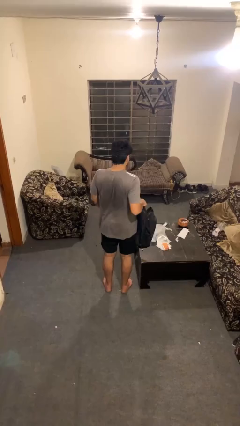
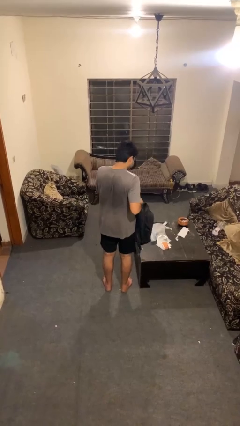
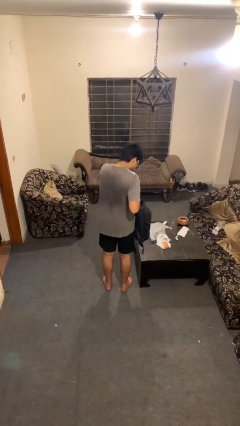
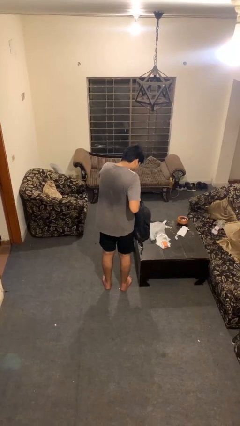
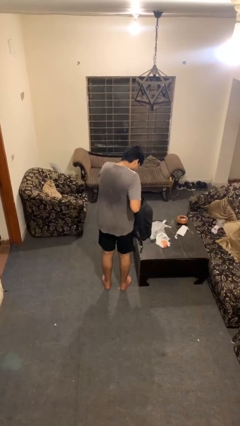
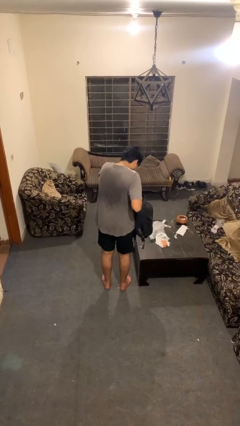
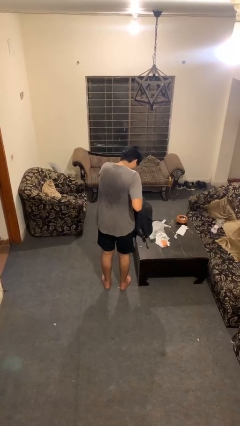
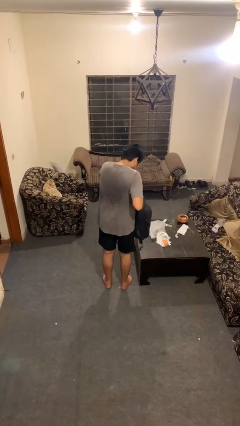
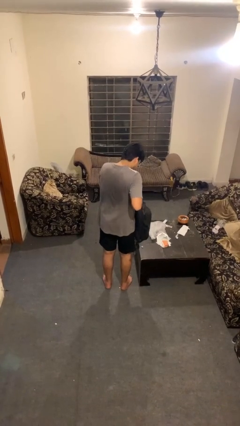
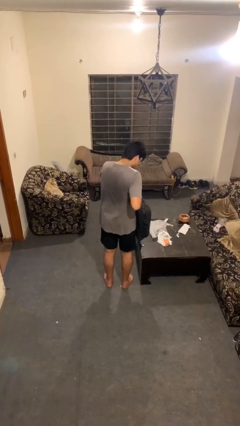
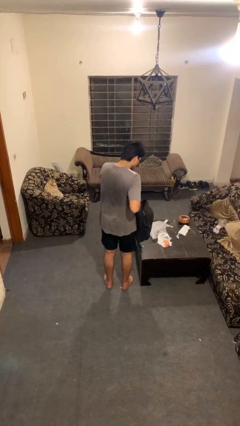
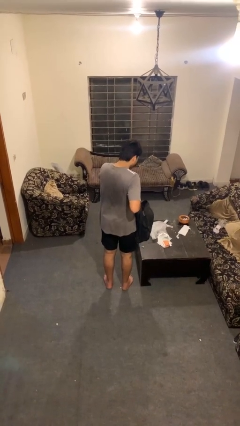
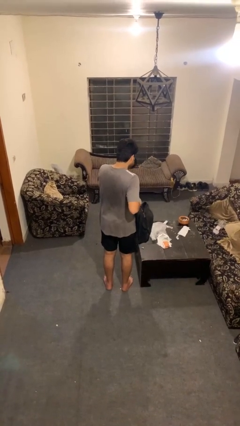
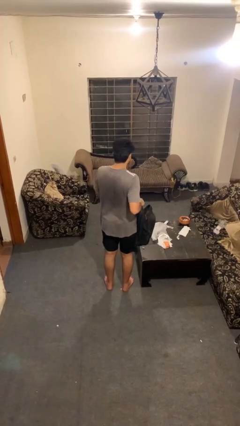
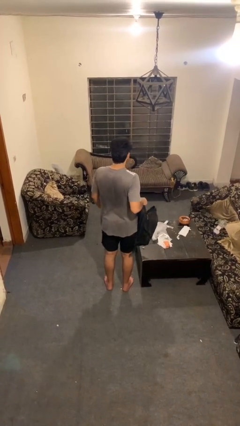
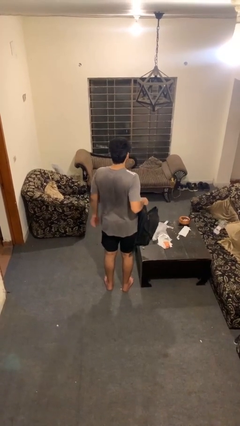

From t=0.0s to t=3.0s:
person searches in bag

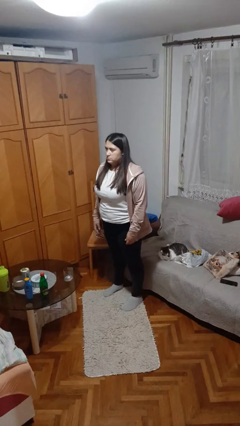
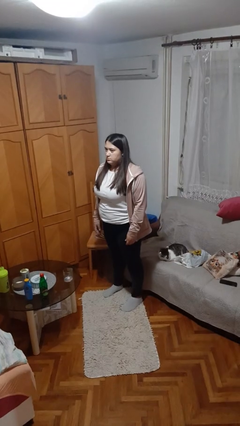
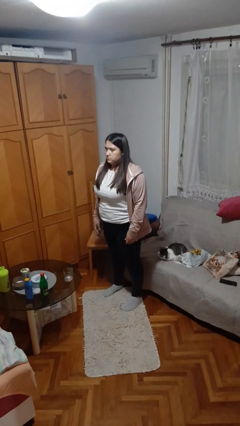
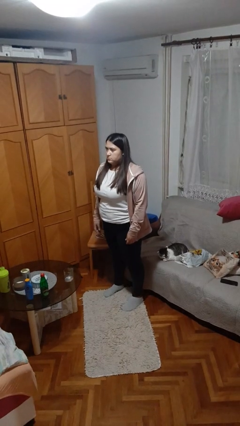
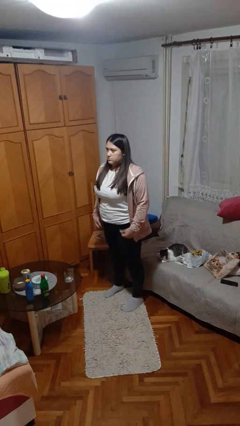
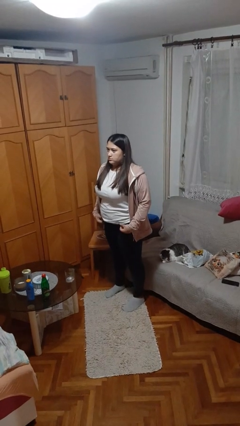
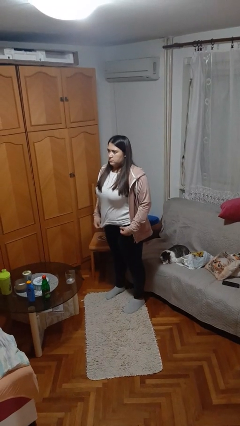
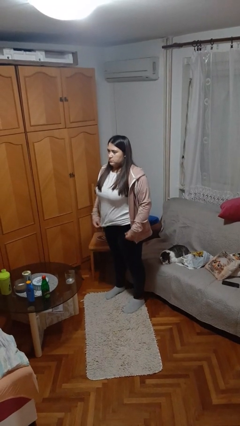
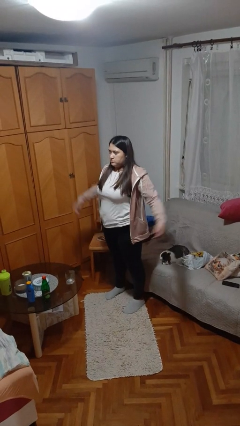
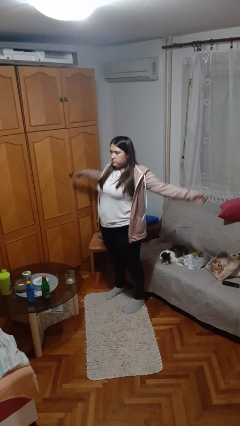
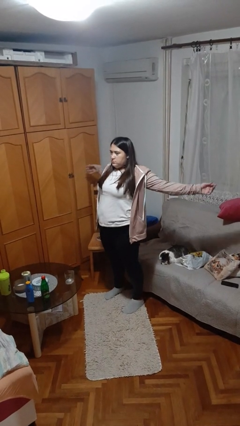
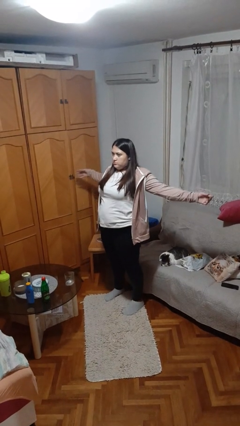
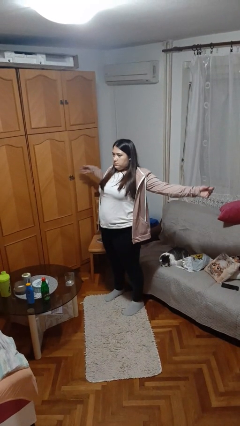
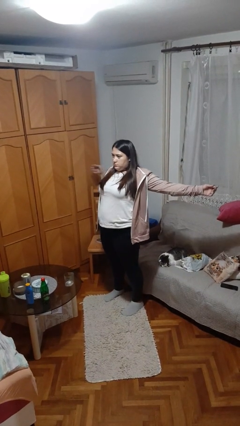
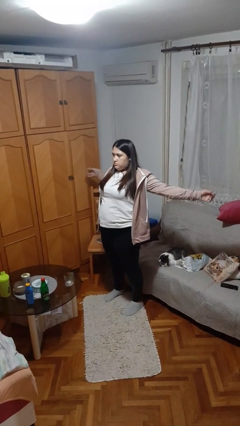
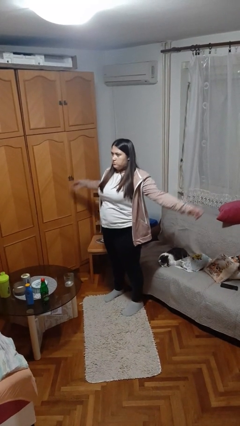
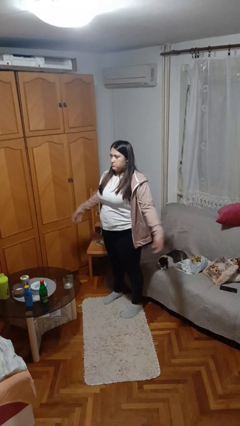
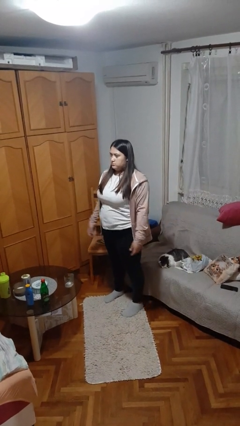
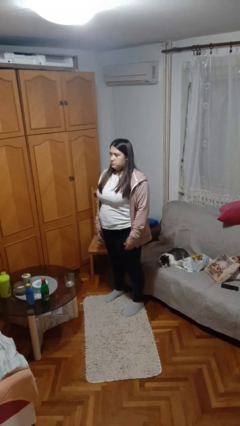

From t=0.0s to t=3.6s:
person stretches arms to side

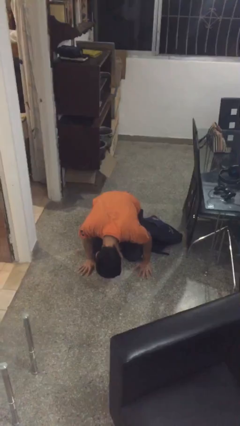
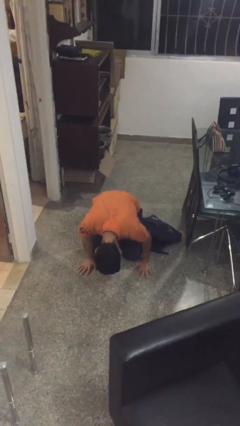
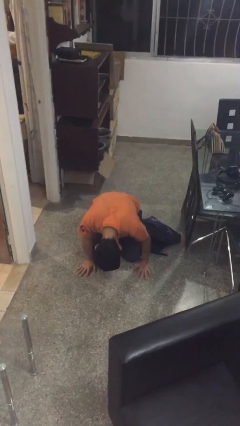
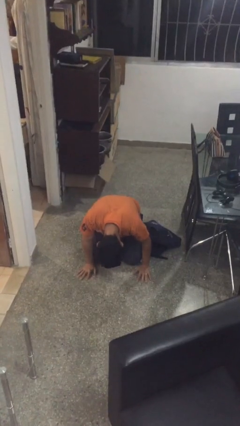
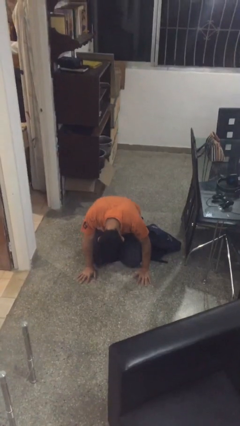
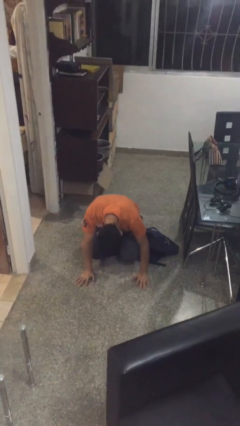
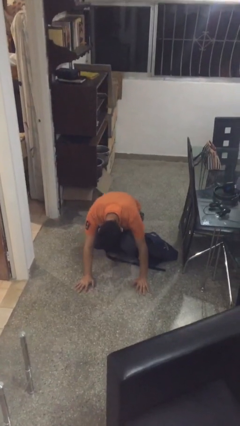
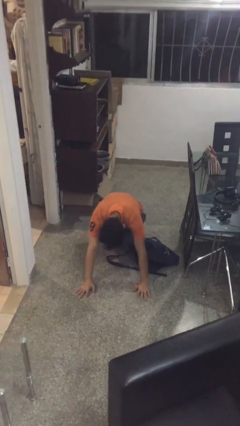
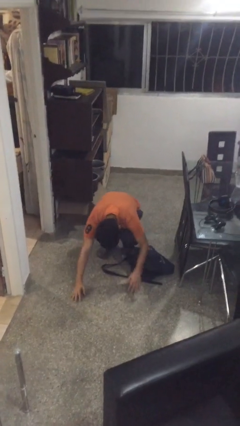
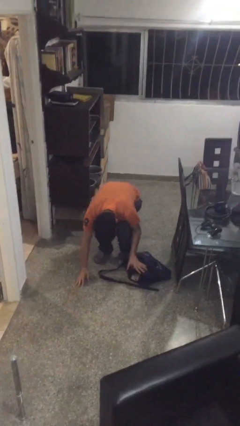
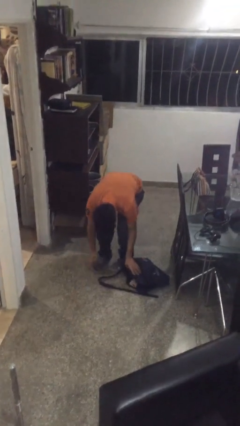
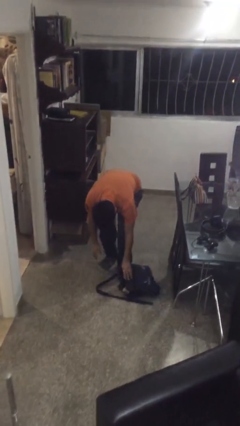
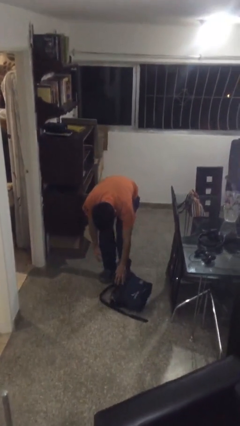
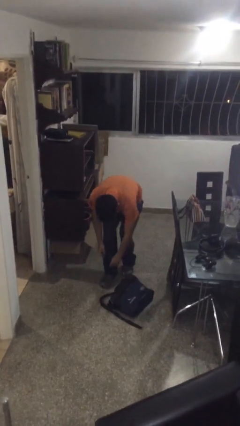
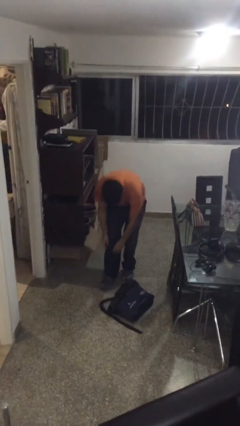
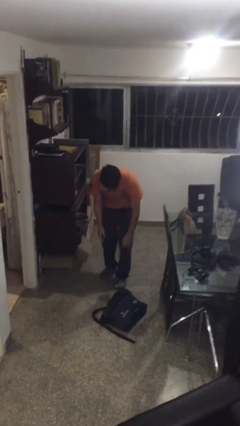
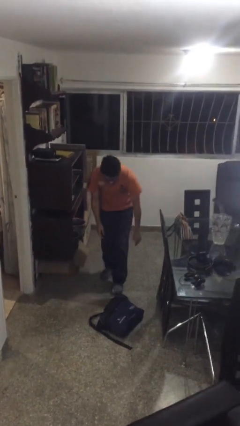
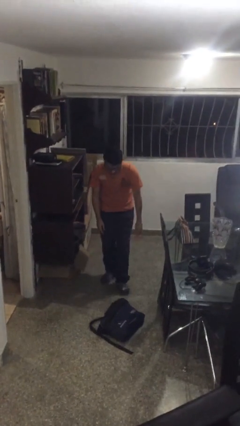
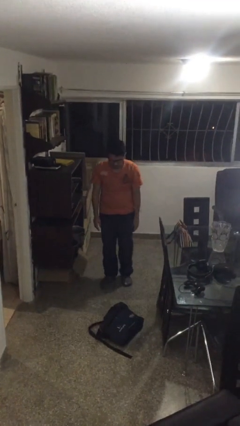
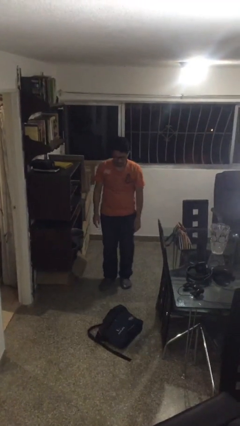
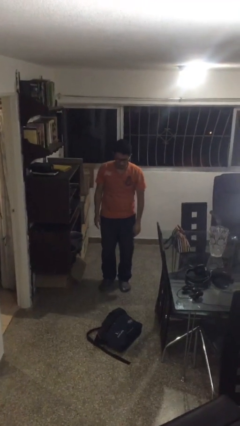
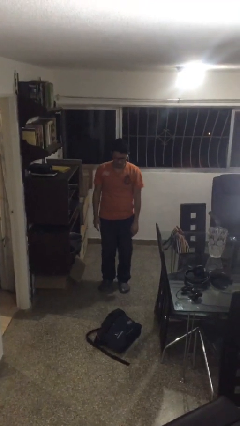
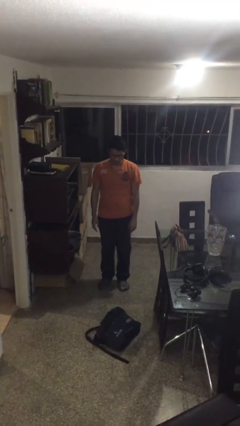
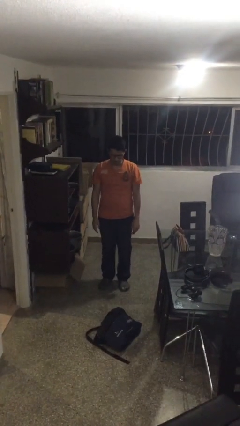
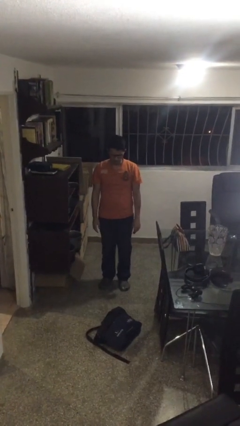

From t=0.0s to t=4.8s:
person stands up from floor

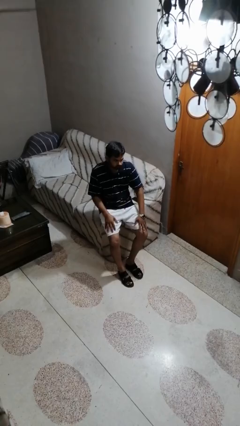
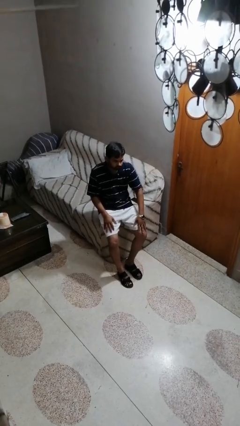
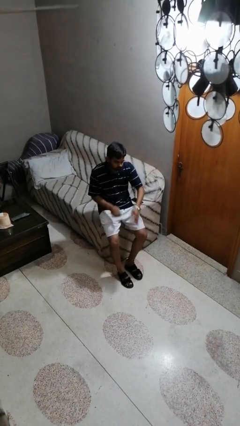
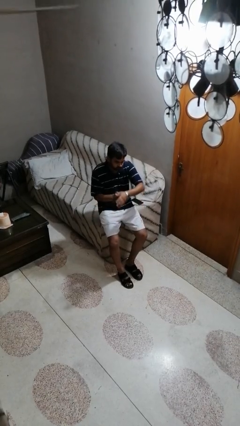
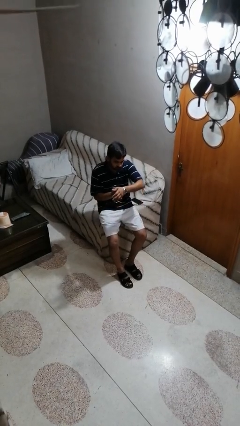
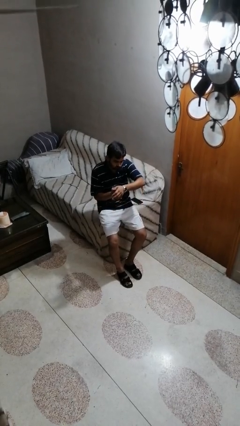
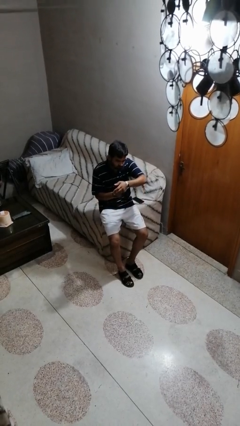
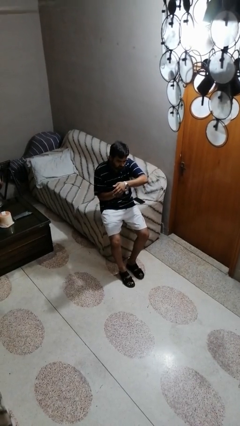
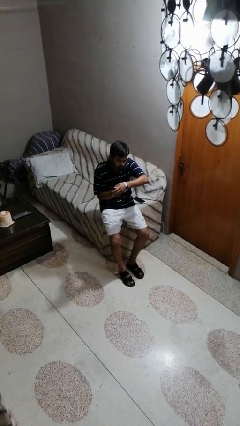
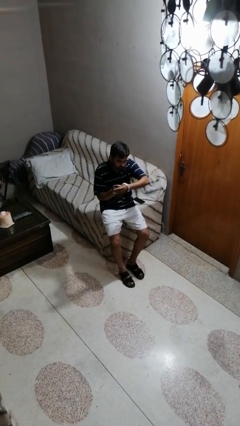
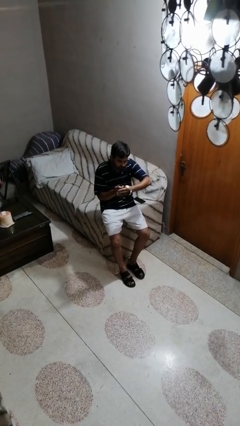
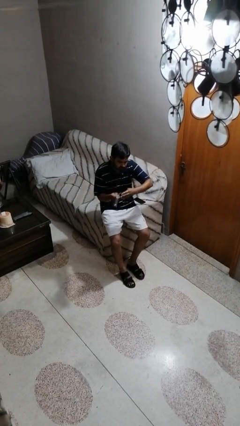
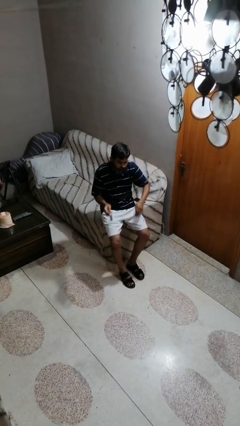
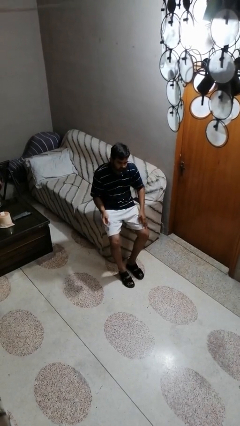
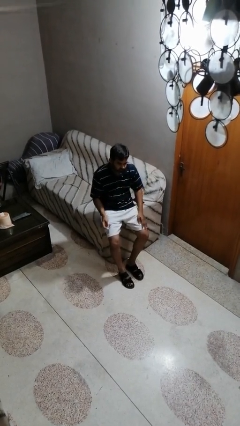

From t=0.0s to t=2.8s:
person takes off wristwatch

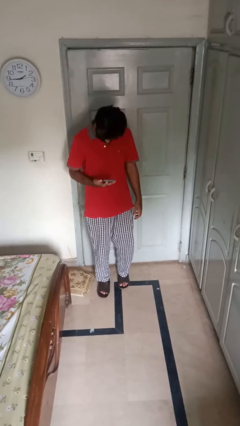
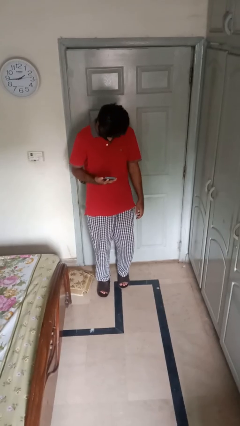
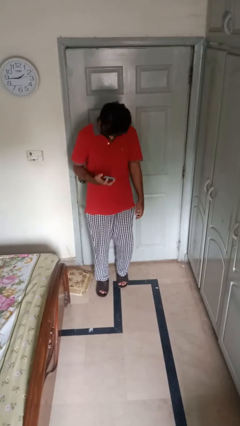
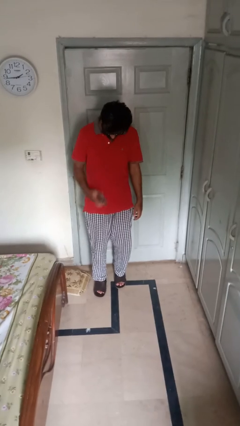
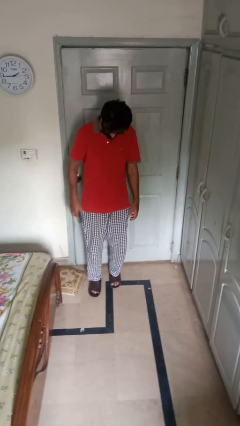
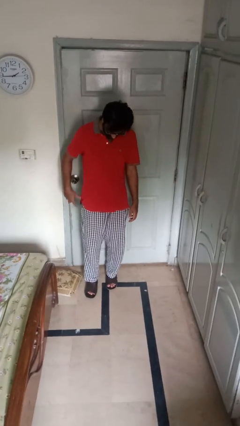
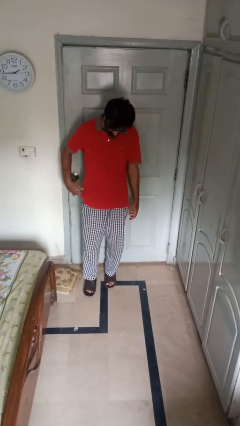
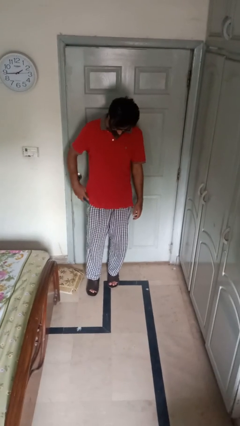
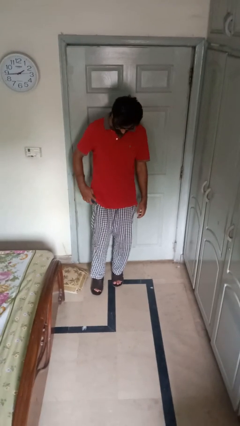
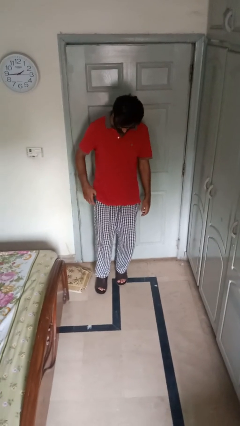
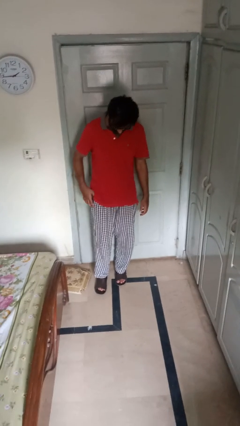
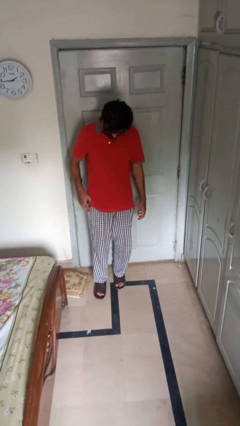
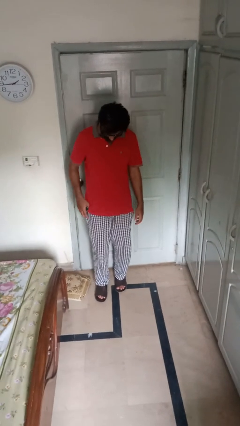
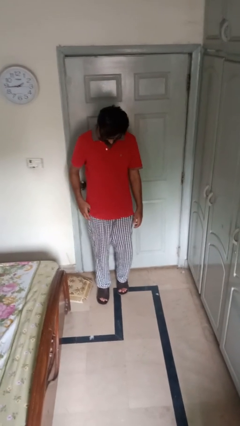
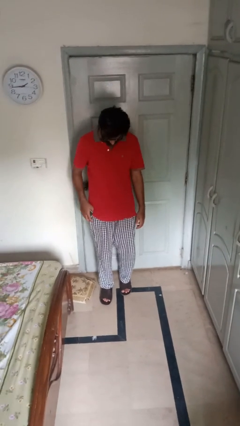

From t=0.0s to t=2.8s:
person puts phone into pocket

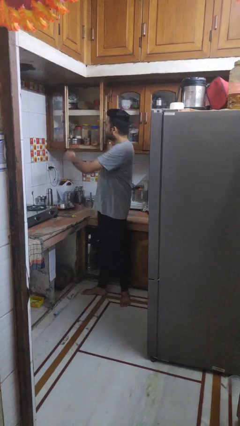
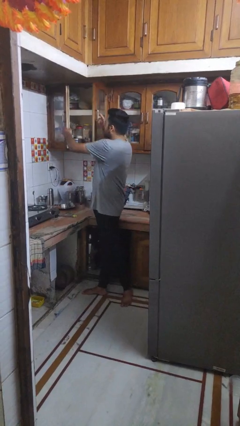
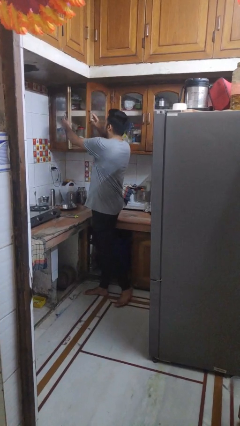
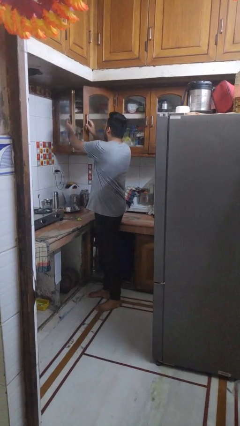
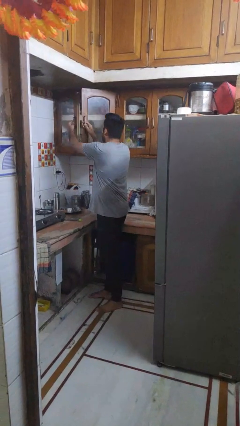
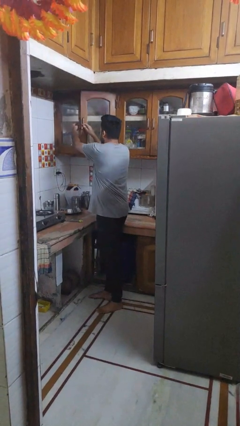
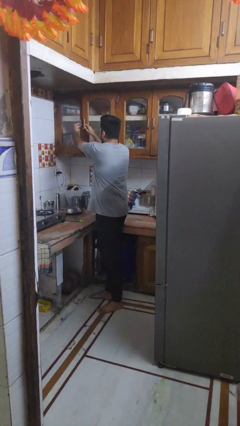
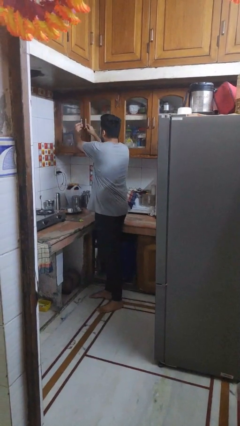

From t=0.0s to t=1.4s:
person closes cabinet
